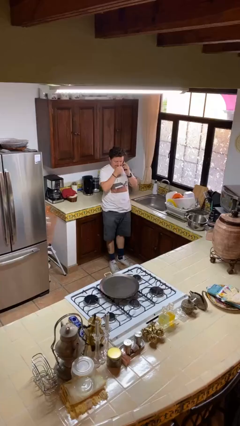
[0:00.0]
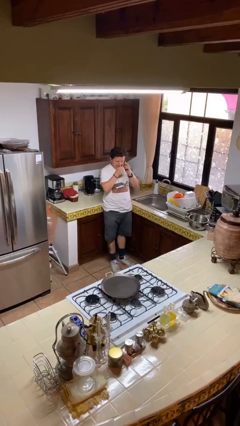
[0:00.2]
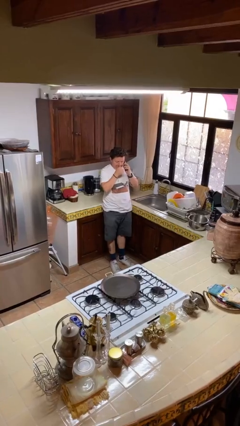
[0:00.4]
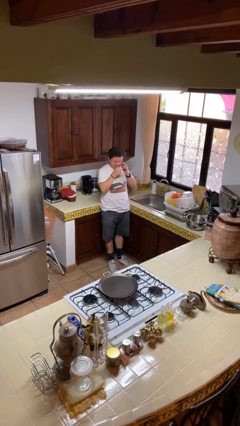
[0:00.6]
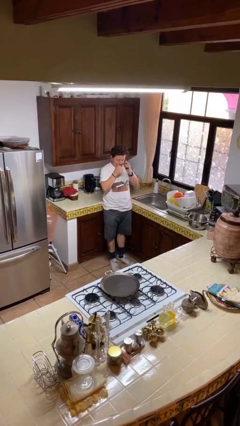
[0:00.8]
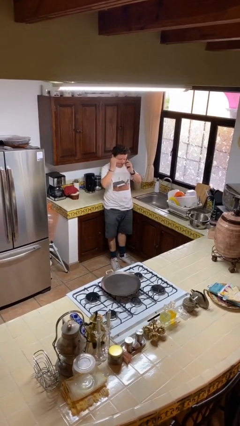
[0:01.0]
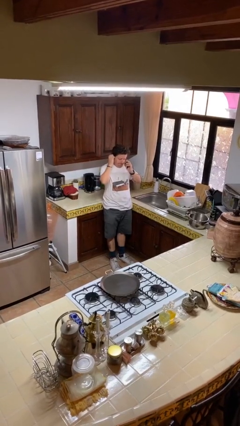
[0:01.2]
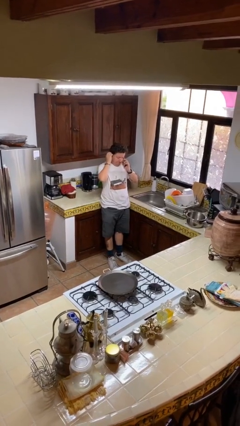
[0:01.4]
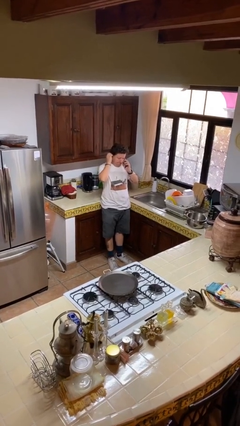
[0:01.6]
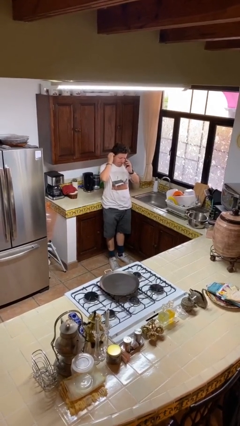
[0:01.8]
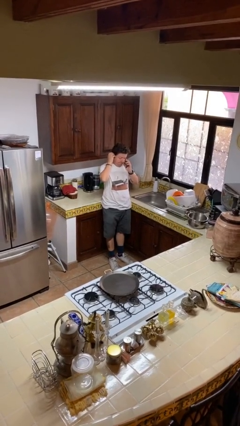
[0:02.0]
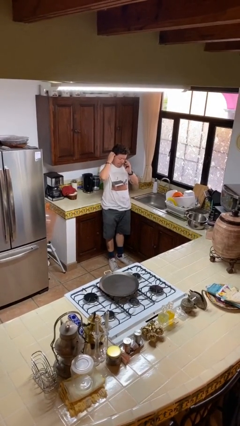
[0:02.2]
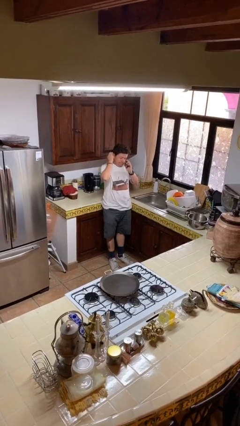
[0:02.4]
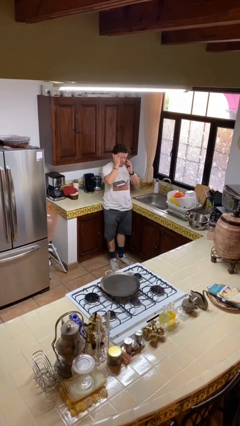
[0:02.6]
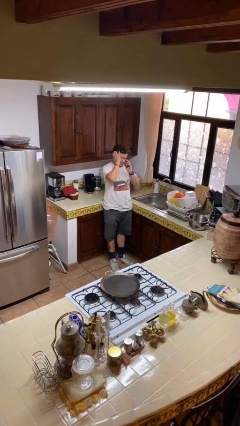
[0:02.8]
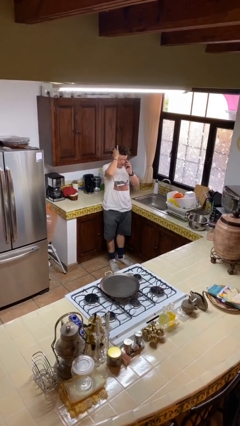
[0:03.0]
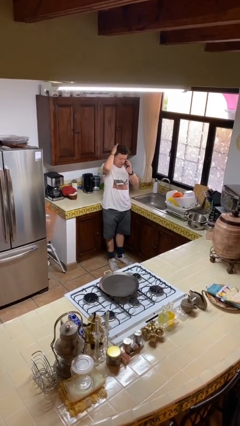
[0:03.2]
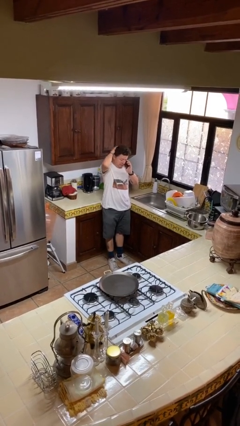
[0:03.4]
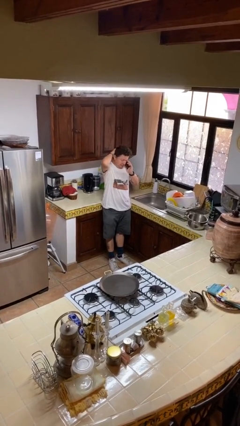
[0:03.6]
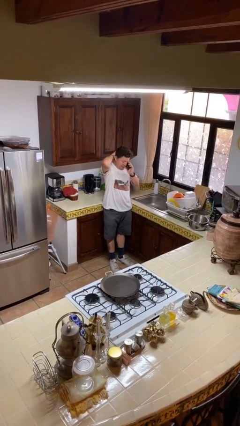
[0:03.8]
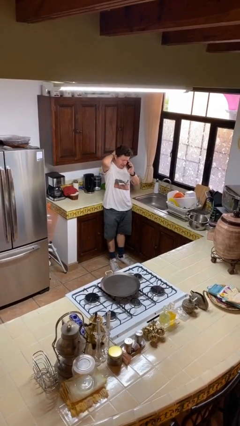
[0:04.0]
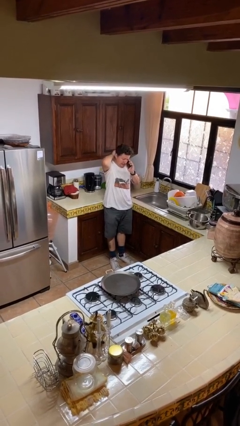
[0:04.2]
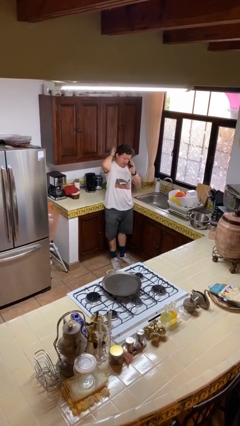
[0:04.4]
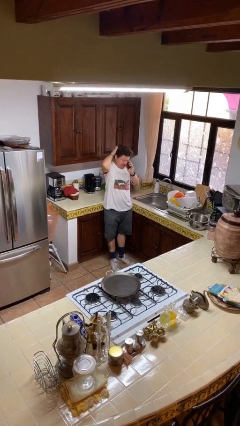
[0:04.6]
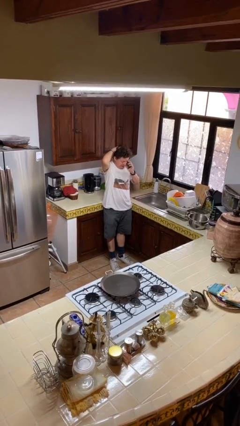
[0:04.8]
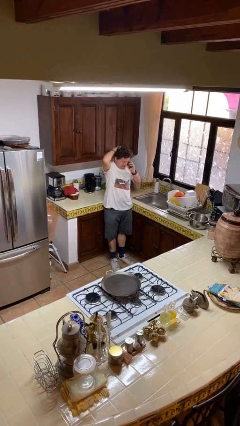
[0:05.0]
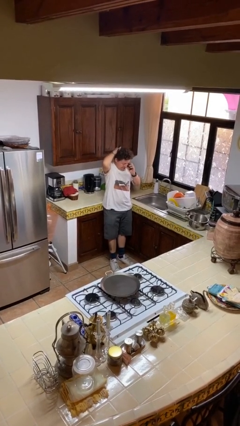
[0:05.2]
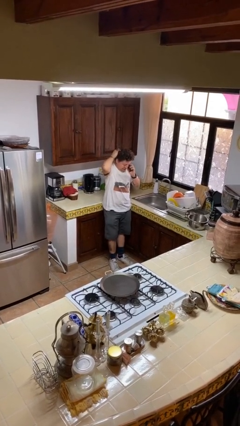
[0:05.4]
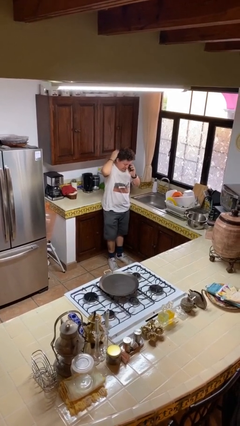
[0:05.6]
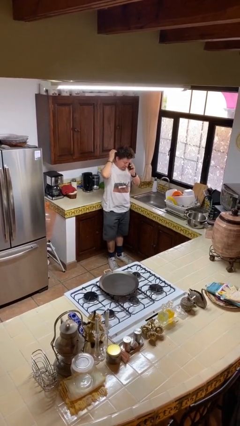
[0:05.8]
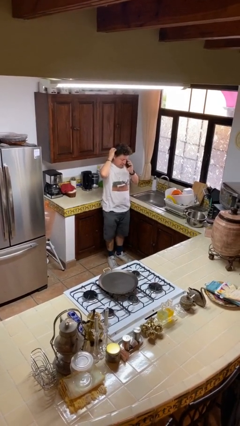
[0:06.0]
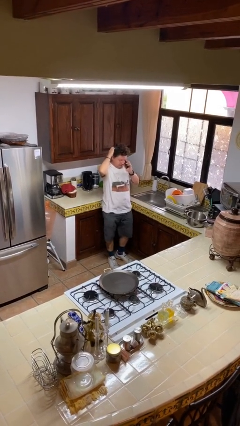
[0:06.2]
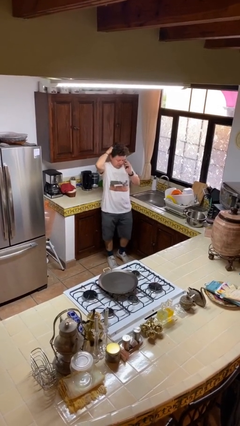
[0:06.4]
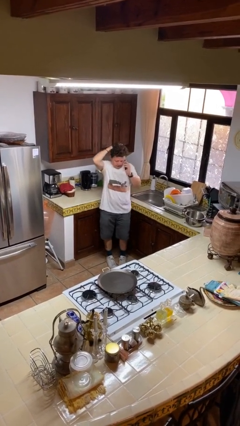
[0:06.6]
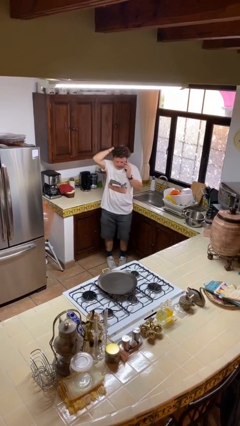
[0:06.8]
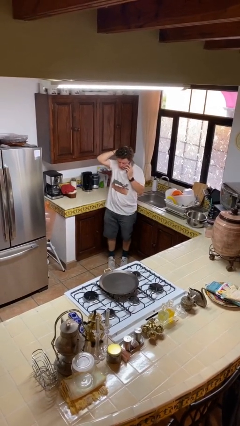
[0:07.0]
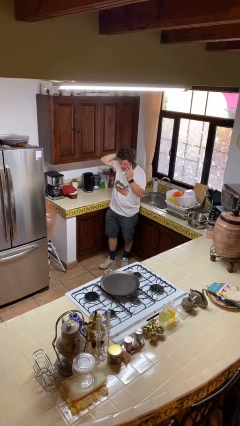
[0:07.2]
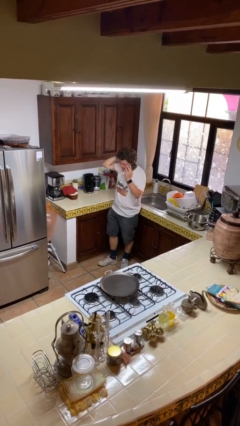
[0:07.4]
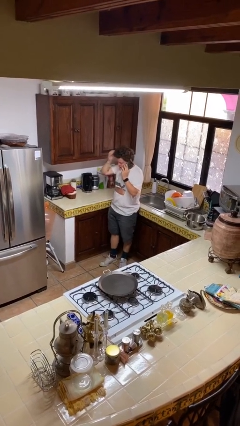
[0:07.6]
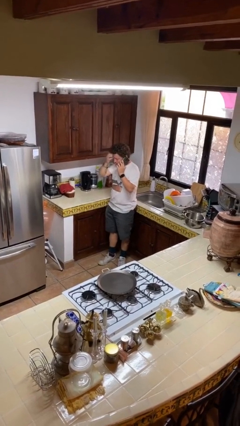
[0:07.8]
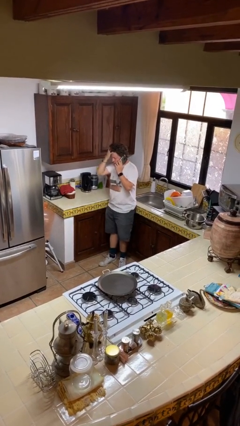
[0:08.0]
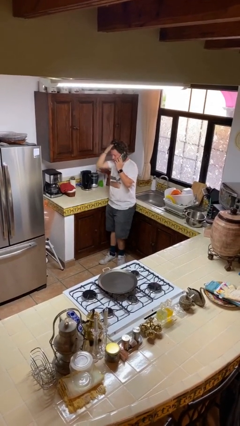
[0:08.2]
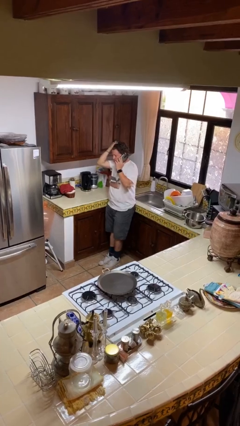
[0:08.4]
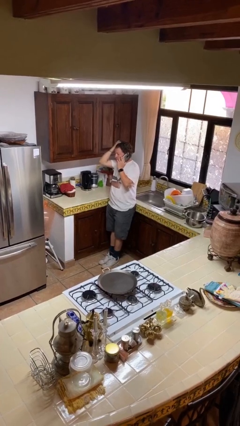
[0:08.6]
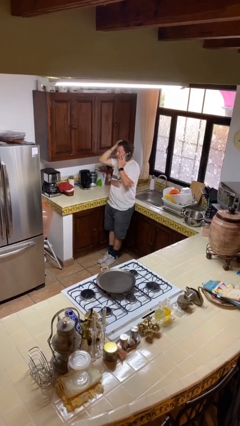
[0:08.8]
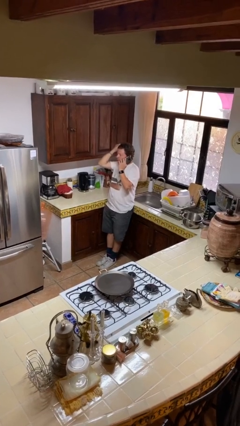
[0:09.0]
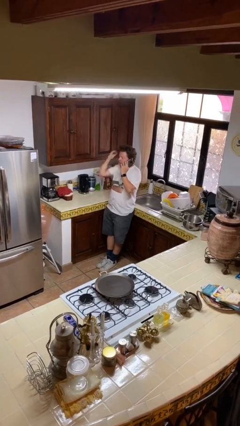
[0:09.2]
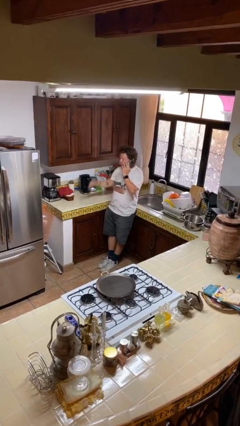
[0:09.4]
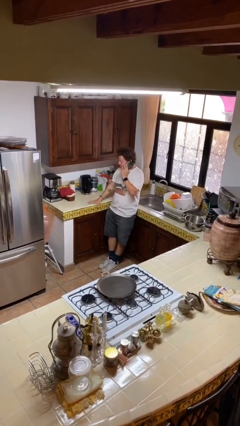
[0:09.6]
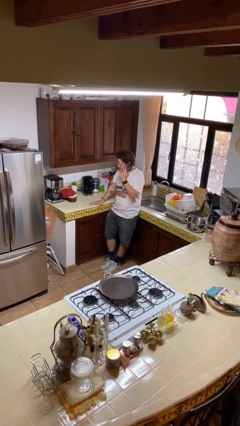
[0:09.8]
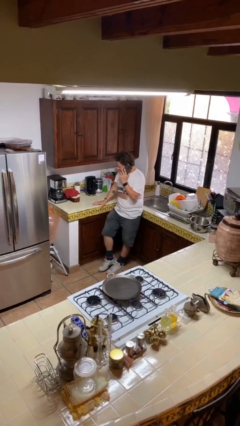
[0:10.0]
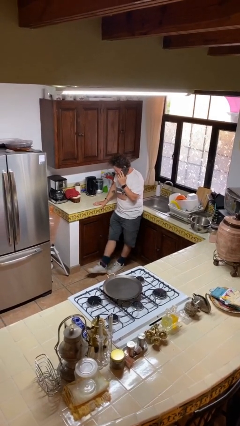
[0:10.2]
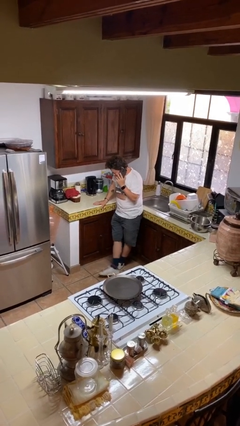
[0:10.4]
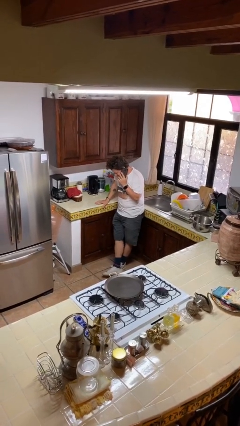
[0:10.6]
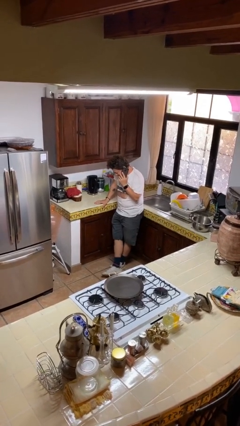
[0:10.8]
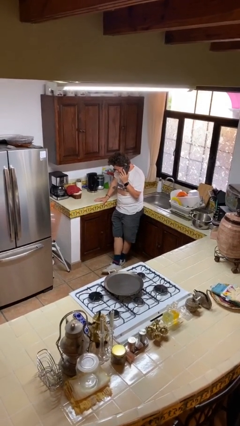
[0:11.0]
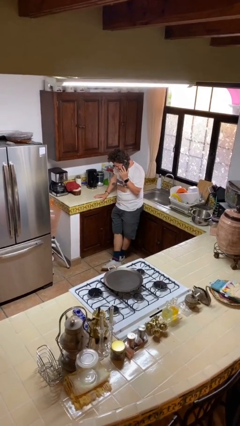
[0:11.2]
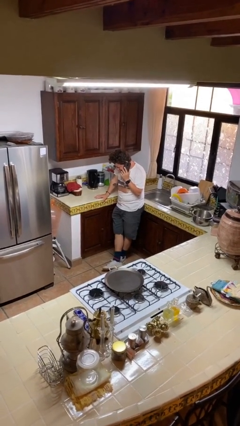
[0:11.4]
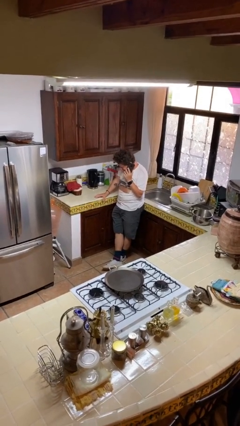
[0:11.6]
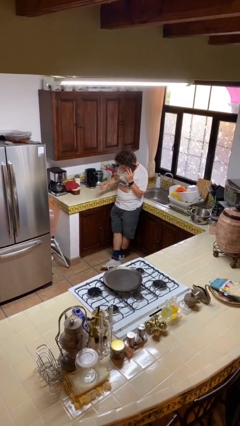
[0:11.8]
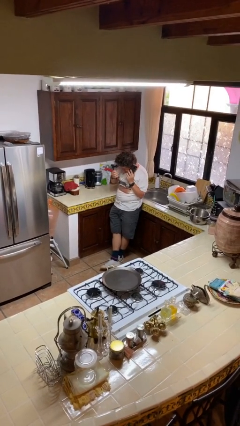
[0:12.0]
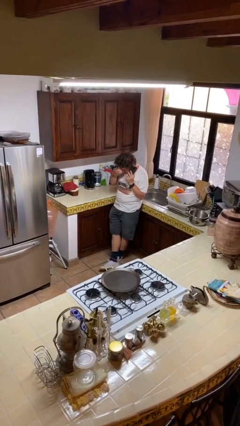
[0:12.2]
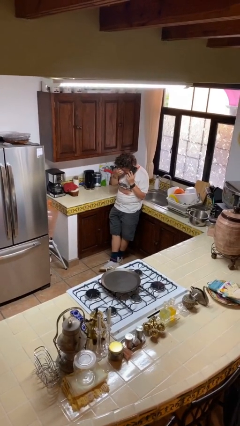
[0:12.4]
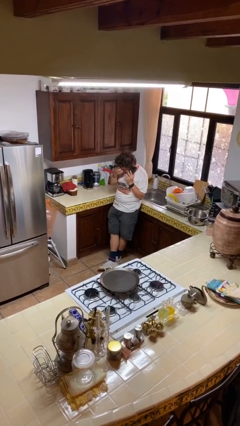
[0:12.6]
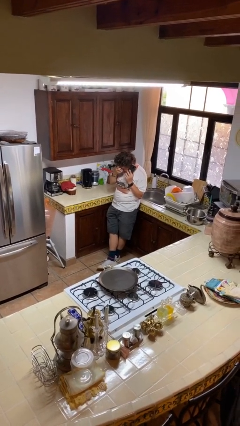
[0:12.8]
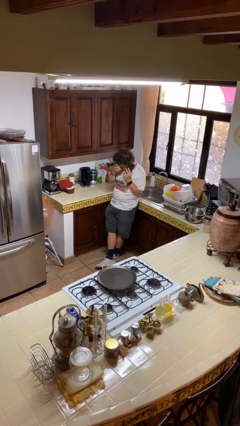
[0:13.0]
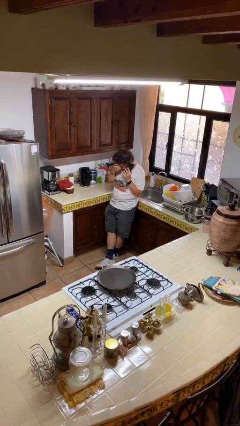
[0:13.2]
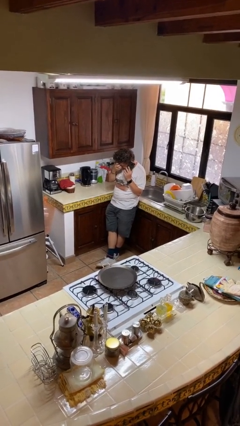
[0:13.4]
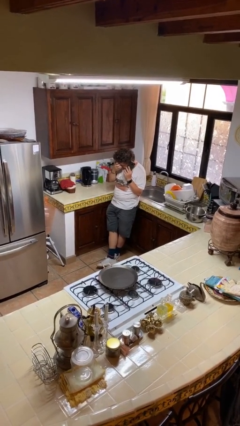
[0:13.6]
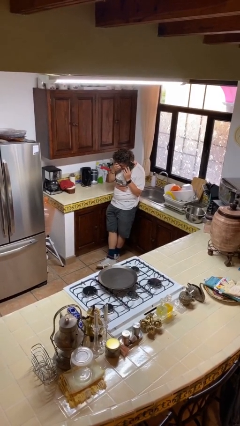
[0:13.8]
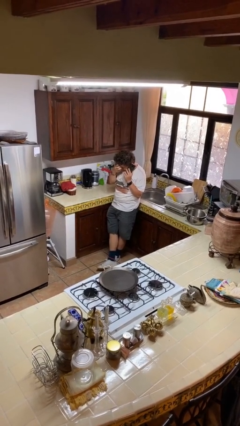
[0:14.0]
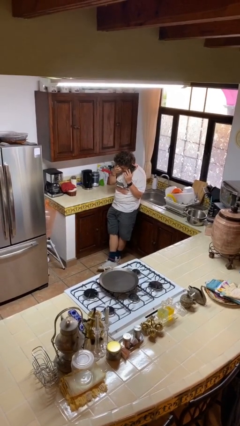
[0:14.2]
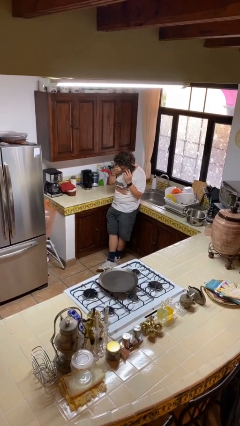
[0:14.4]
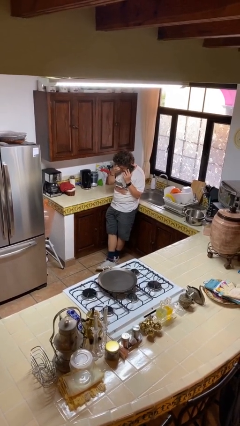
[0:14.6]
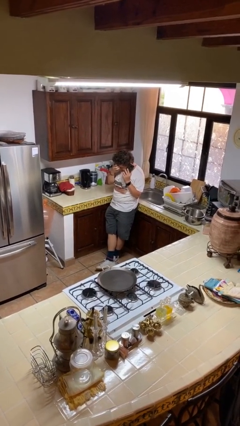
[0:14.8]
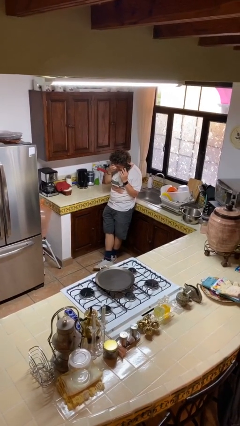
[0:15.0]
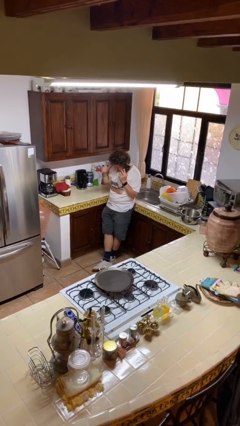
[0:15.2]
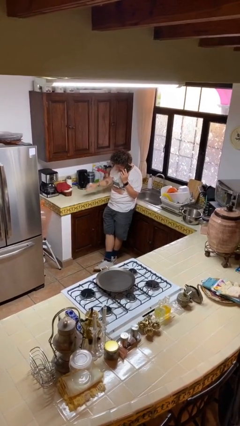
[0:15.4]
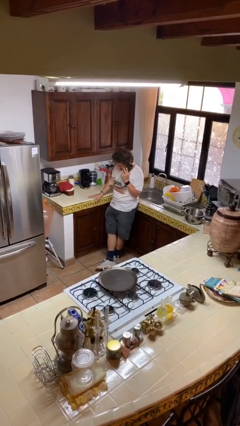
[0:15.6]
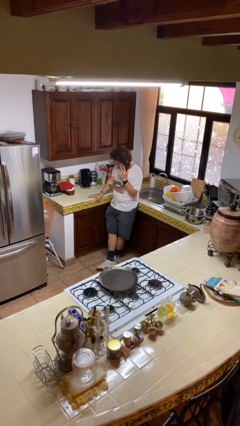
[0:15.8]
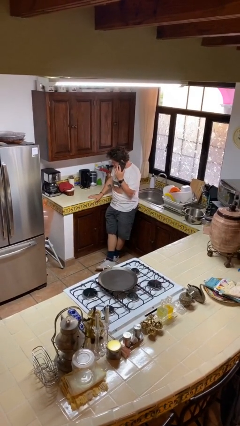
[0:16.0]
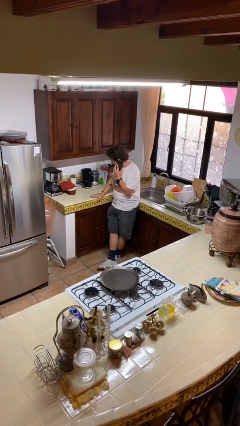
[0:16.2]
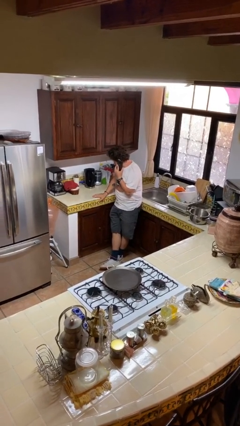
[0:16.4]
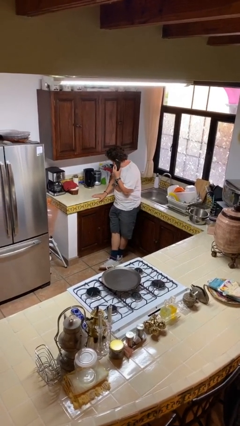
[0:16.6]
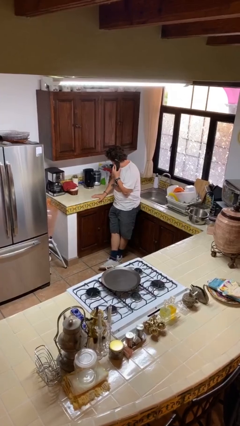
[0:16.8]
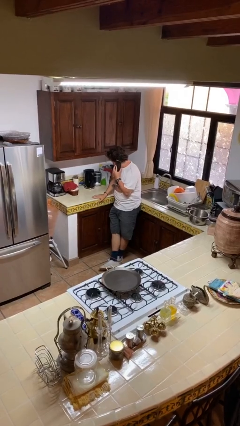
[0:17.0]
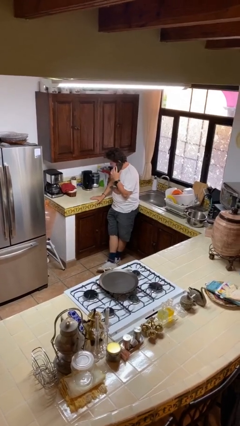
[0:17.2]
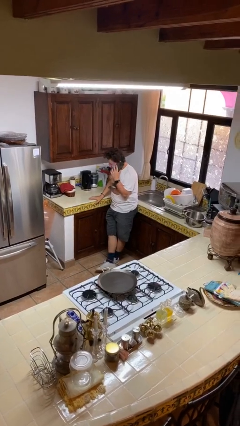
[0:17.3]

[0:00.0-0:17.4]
person talks on phone

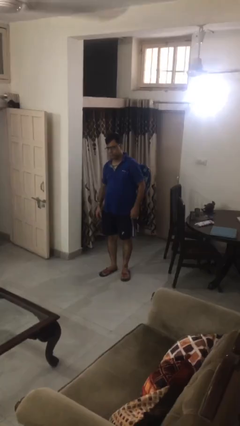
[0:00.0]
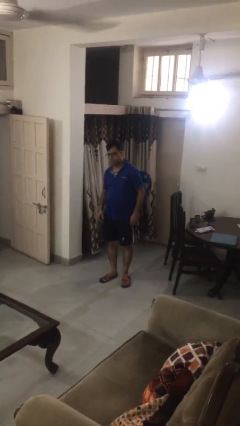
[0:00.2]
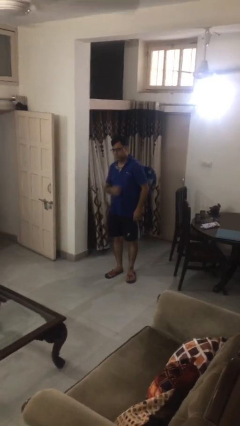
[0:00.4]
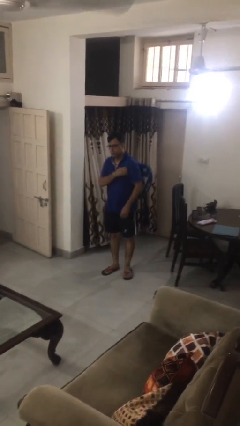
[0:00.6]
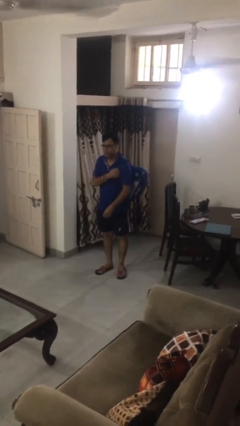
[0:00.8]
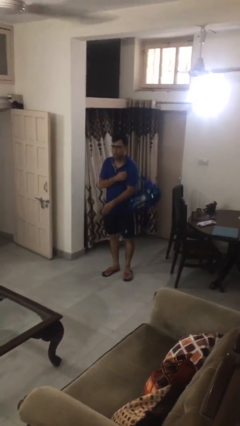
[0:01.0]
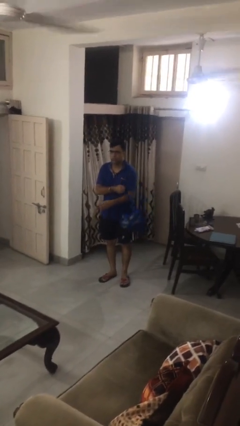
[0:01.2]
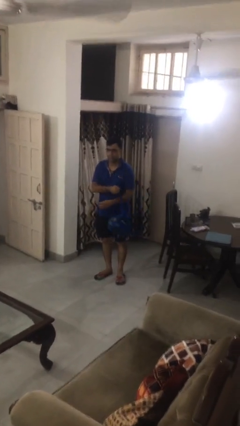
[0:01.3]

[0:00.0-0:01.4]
person takes off backpack
